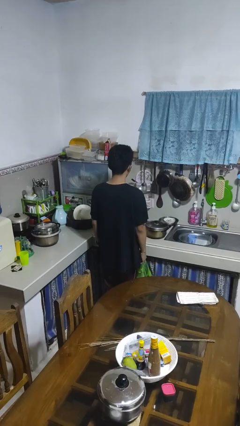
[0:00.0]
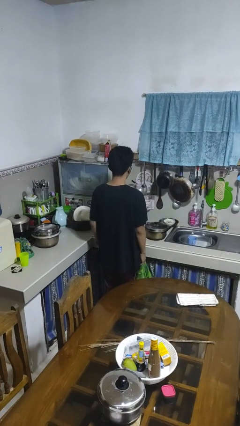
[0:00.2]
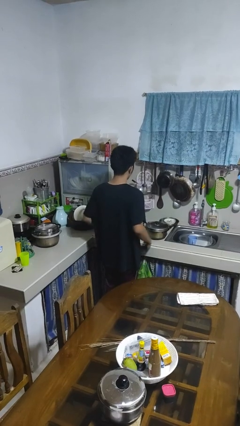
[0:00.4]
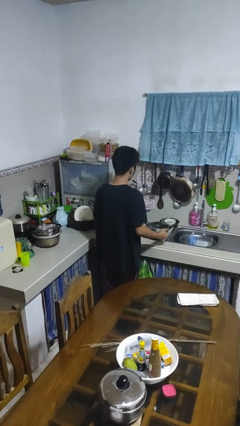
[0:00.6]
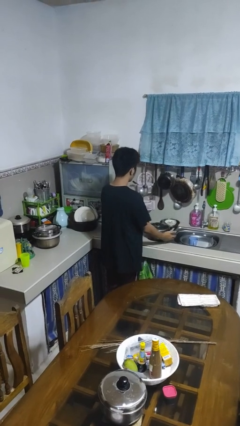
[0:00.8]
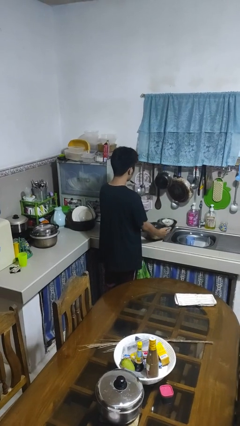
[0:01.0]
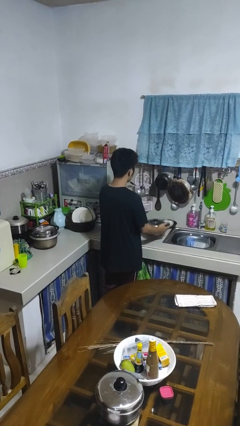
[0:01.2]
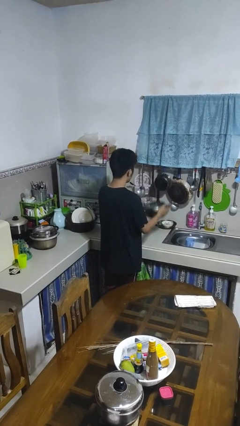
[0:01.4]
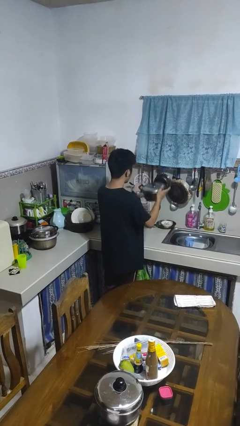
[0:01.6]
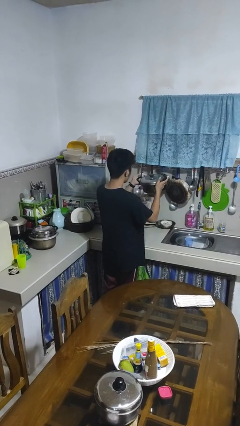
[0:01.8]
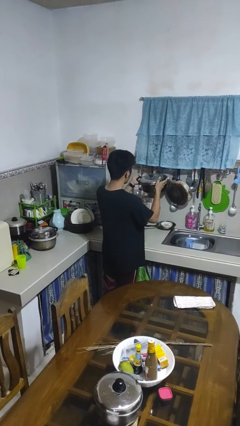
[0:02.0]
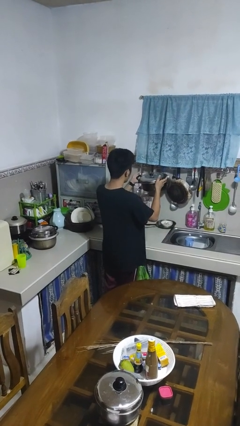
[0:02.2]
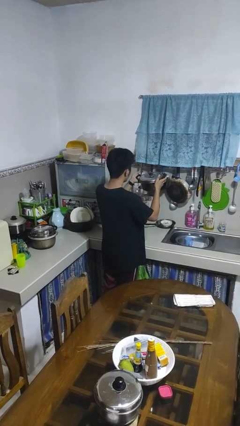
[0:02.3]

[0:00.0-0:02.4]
person picks up object from countertop

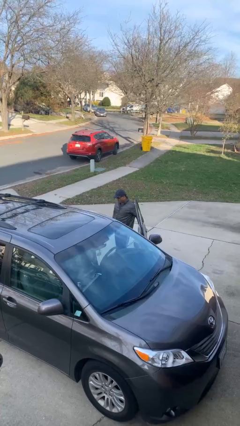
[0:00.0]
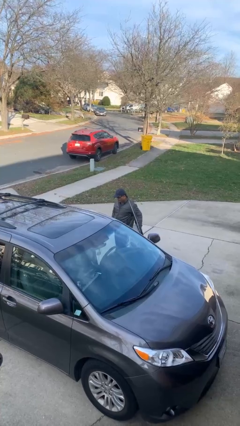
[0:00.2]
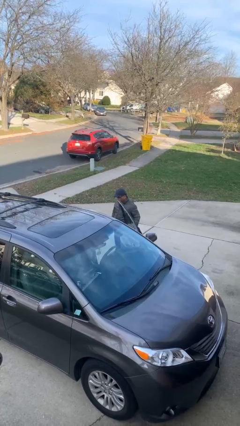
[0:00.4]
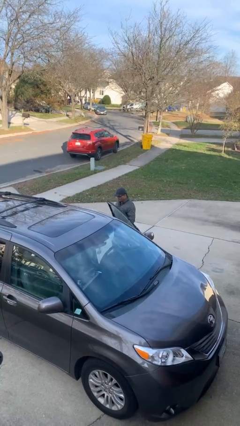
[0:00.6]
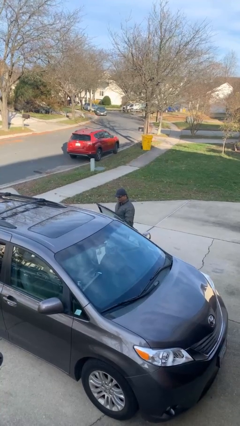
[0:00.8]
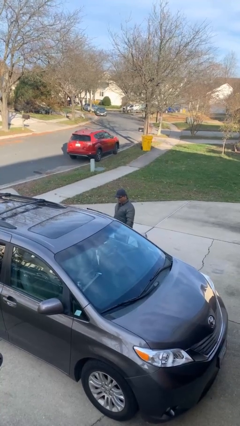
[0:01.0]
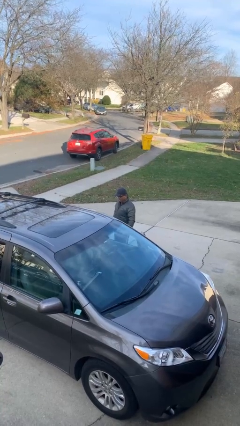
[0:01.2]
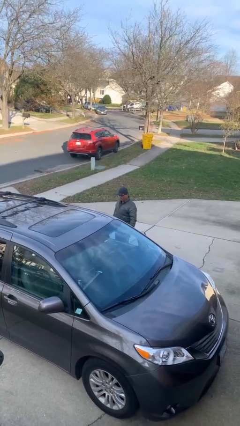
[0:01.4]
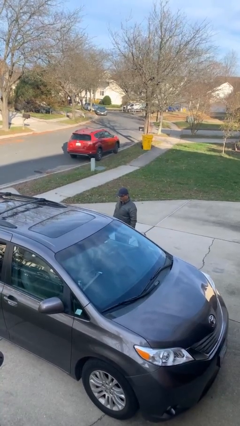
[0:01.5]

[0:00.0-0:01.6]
person closes car door

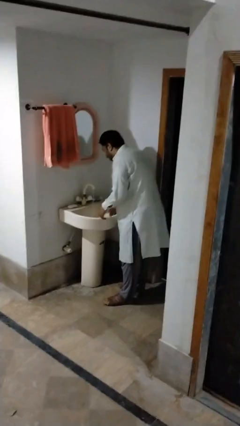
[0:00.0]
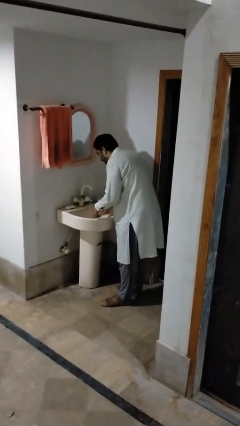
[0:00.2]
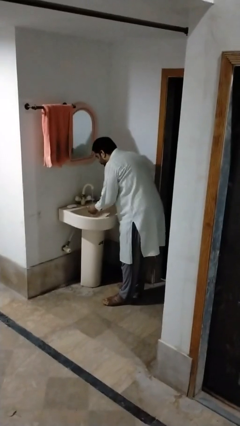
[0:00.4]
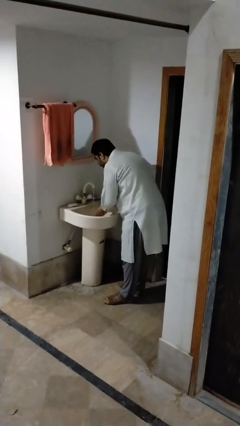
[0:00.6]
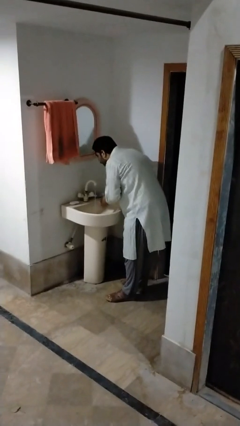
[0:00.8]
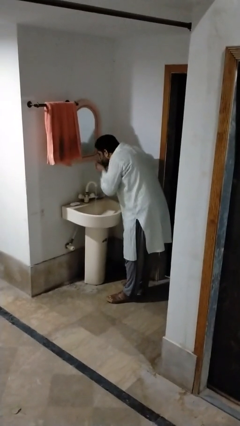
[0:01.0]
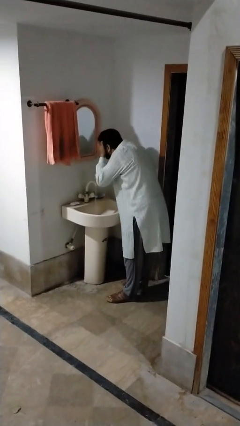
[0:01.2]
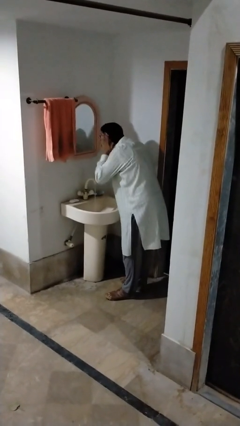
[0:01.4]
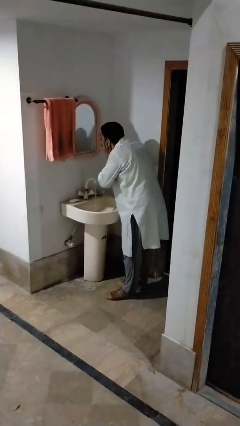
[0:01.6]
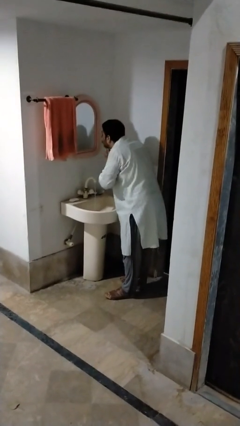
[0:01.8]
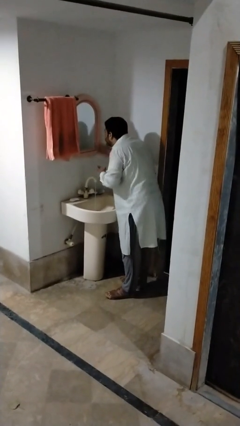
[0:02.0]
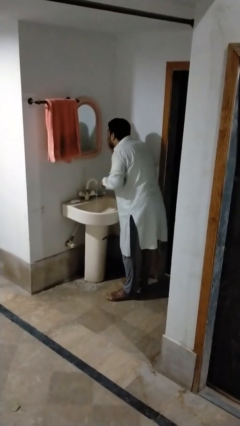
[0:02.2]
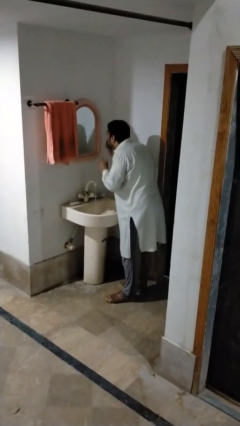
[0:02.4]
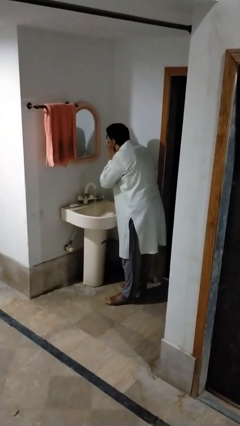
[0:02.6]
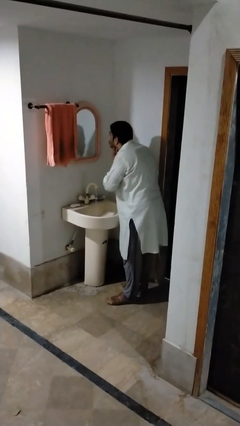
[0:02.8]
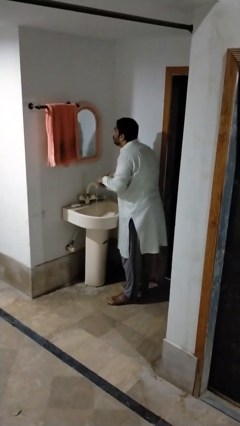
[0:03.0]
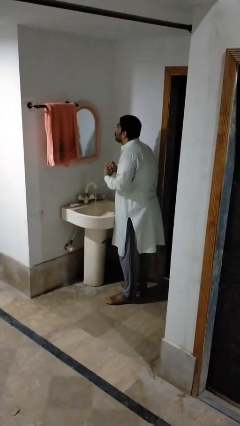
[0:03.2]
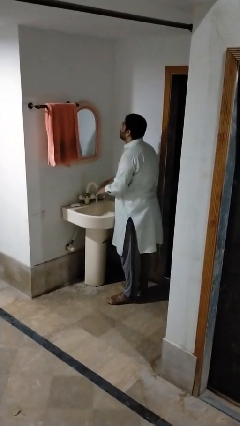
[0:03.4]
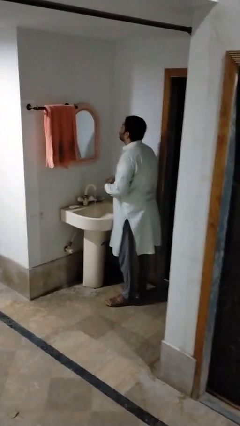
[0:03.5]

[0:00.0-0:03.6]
person washes face

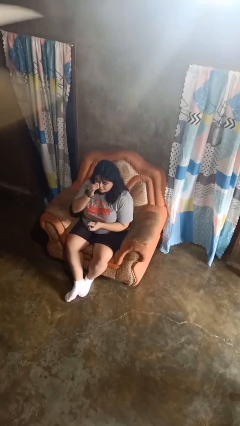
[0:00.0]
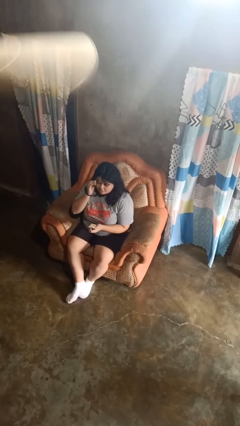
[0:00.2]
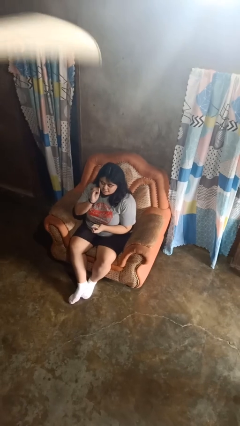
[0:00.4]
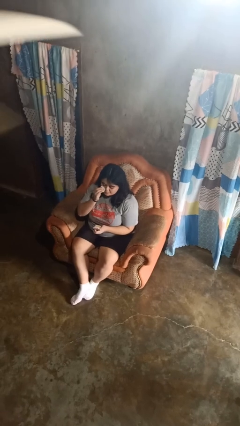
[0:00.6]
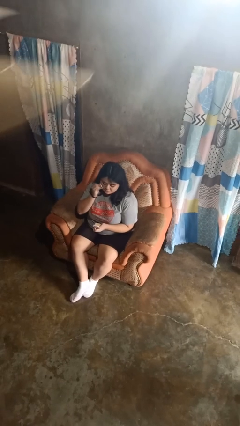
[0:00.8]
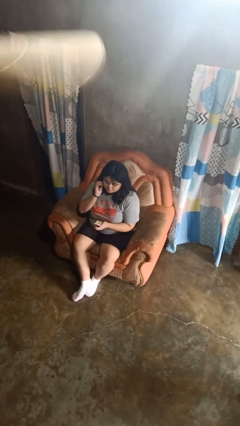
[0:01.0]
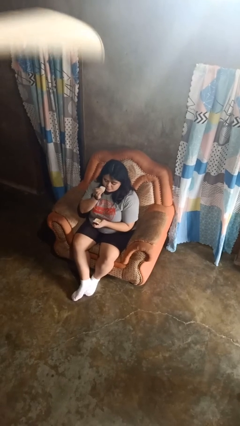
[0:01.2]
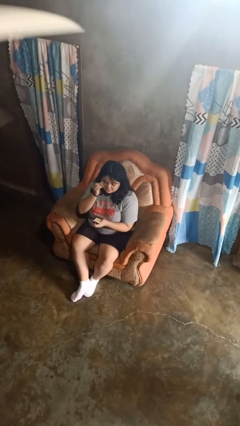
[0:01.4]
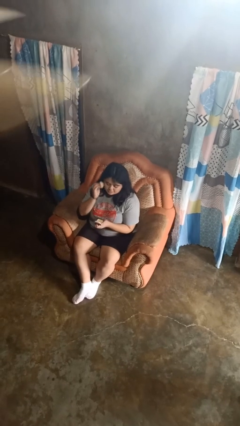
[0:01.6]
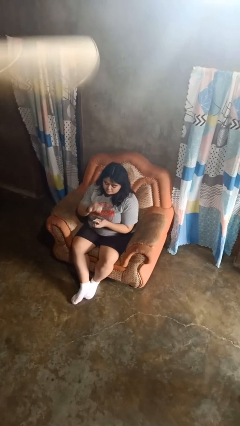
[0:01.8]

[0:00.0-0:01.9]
person applies foundation makeup

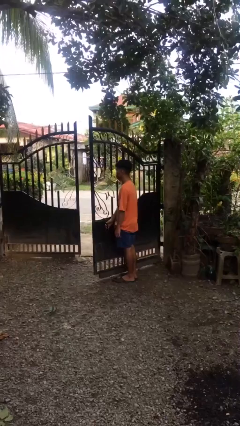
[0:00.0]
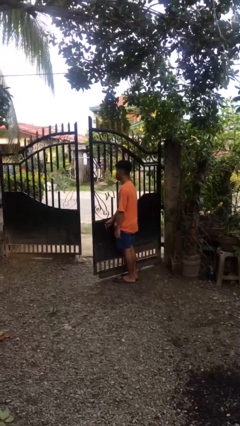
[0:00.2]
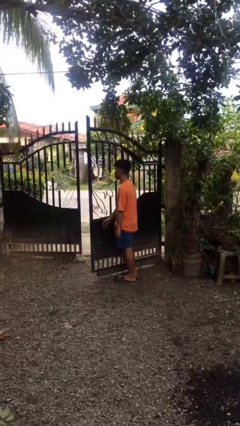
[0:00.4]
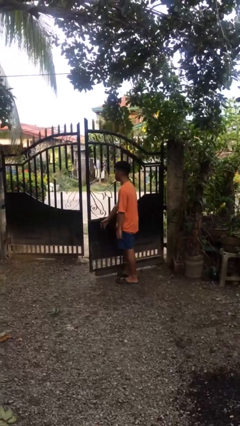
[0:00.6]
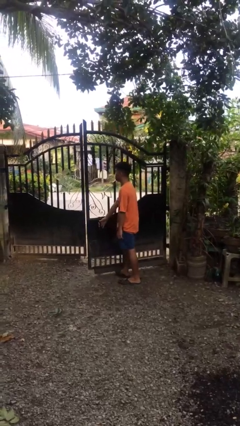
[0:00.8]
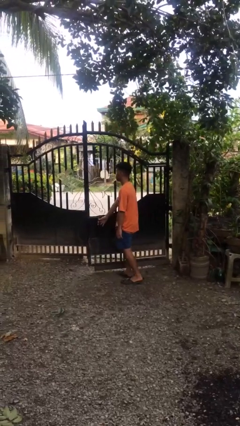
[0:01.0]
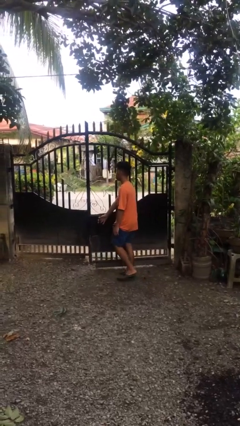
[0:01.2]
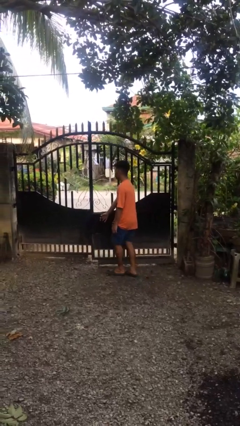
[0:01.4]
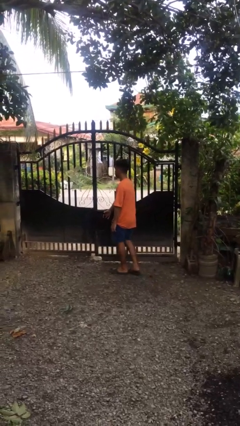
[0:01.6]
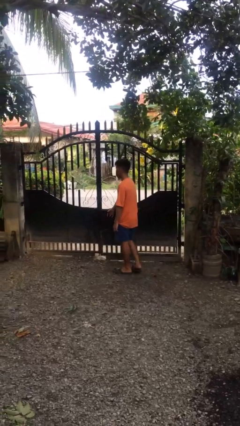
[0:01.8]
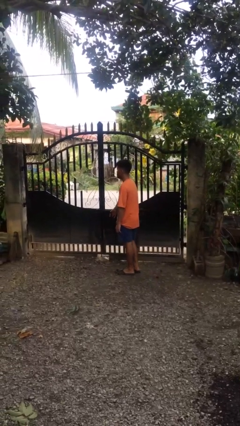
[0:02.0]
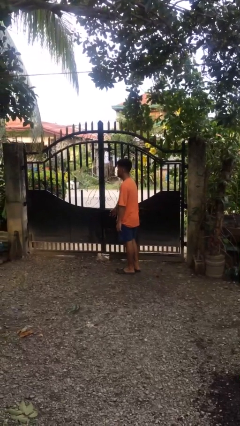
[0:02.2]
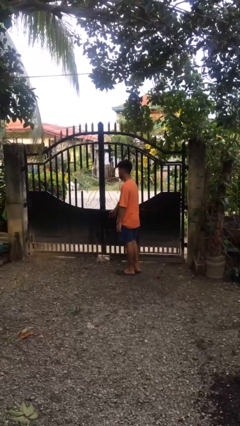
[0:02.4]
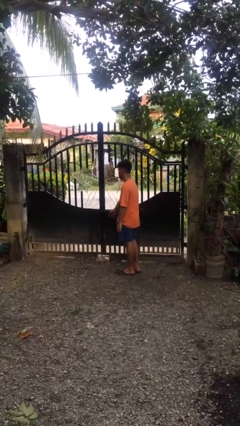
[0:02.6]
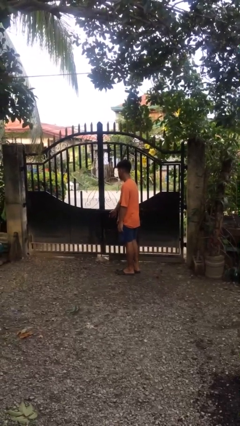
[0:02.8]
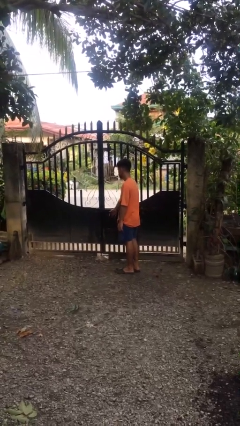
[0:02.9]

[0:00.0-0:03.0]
person closes gate

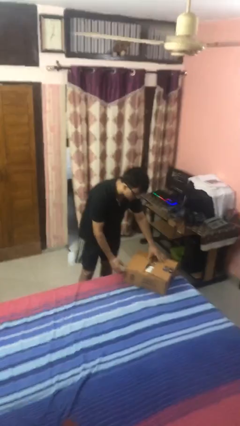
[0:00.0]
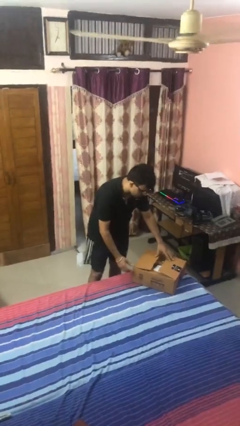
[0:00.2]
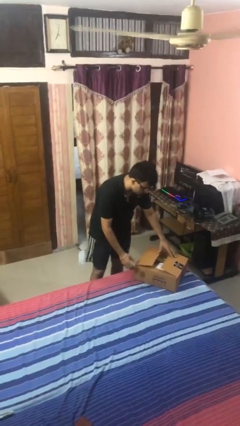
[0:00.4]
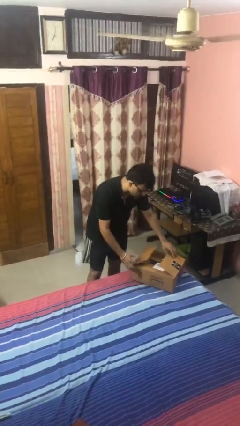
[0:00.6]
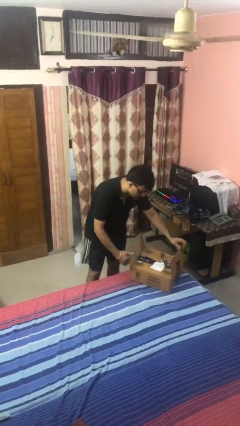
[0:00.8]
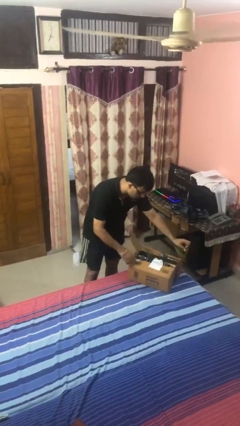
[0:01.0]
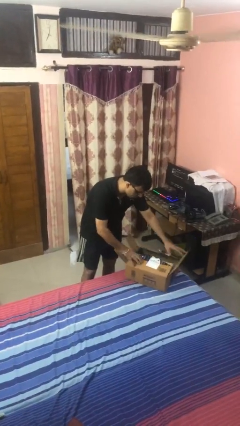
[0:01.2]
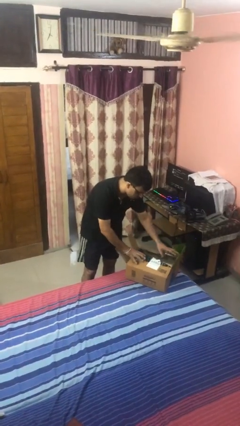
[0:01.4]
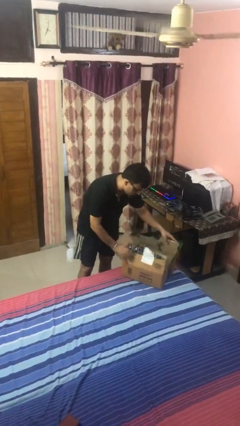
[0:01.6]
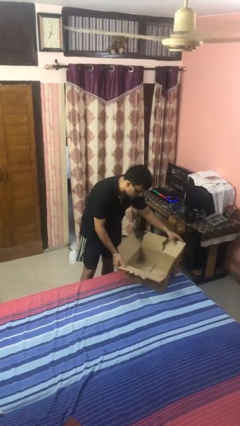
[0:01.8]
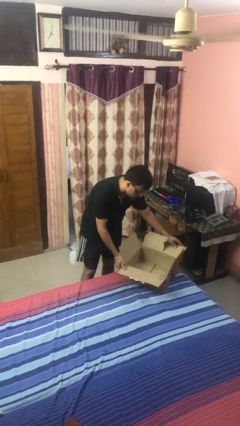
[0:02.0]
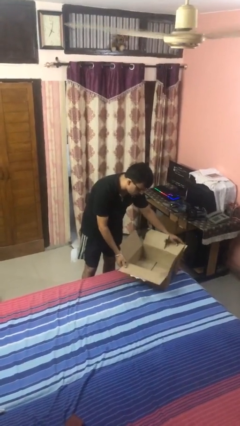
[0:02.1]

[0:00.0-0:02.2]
person opens box

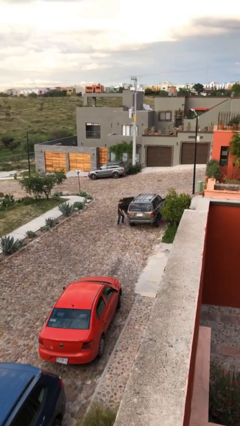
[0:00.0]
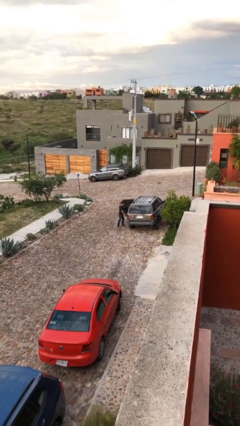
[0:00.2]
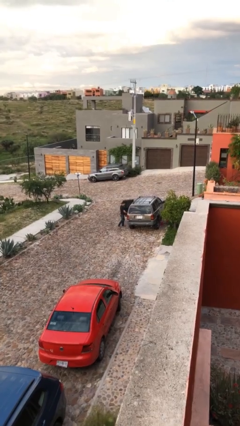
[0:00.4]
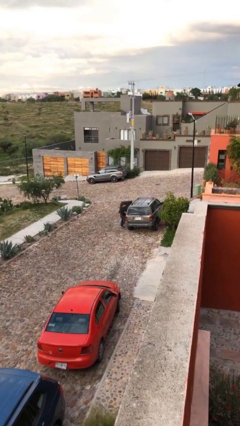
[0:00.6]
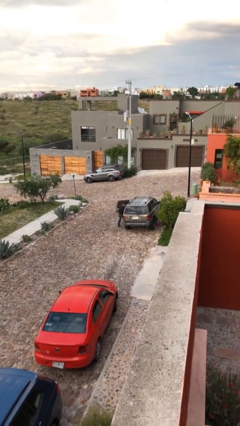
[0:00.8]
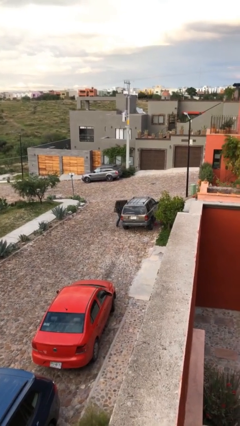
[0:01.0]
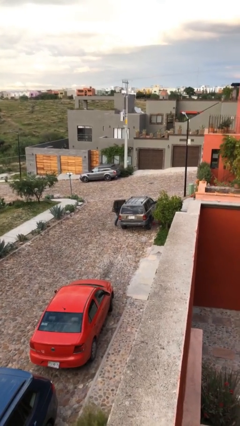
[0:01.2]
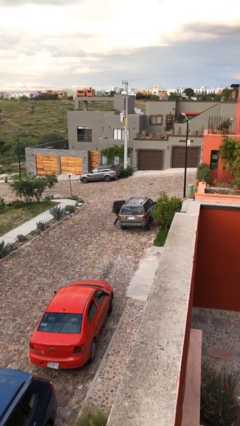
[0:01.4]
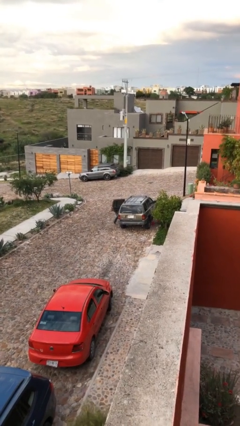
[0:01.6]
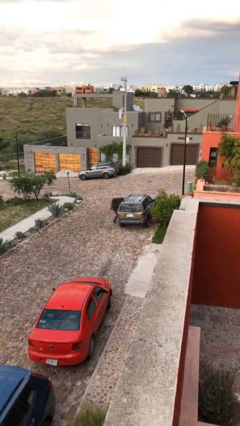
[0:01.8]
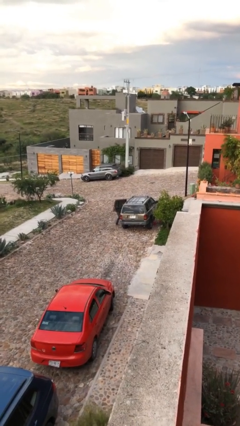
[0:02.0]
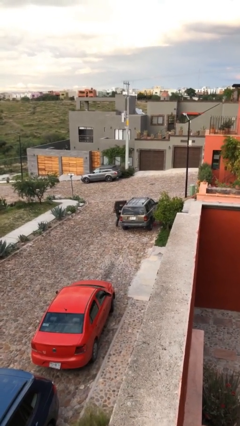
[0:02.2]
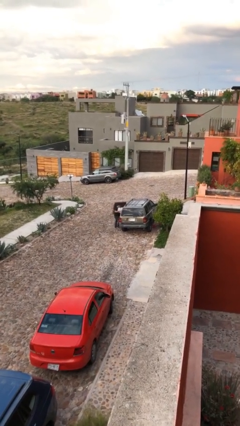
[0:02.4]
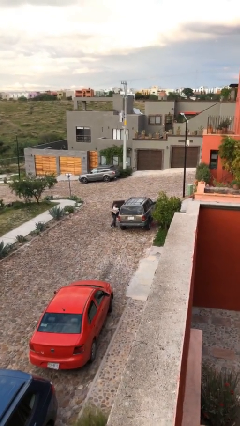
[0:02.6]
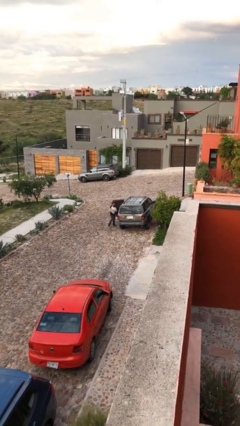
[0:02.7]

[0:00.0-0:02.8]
person unloads car
